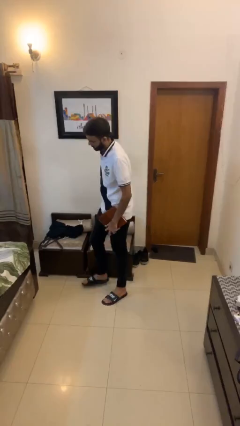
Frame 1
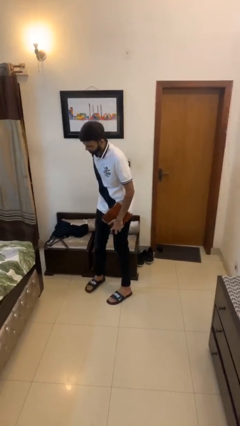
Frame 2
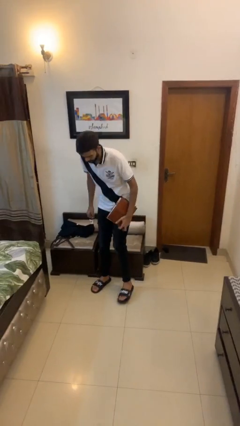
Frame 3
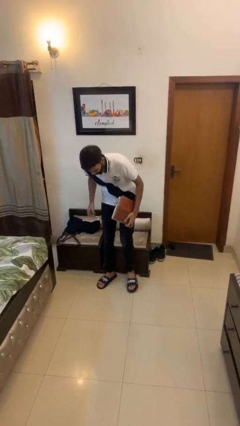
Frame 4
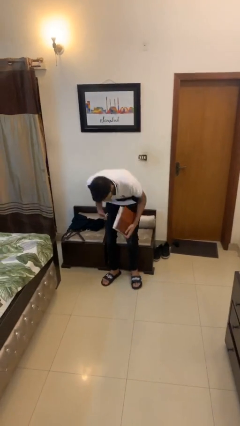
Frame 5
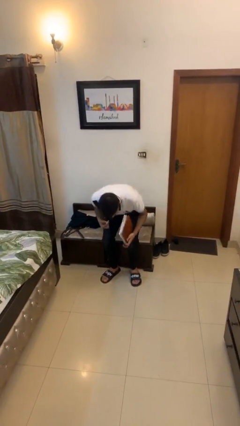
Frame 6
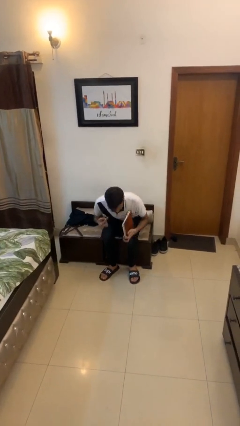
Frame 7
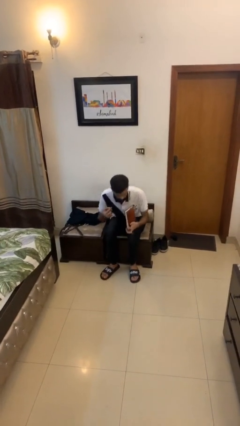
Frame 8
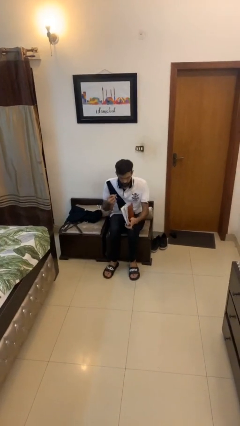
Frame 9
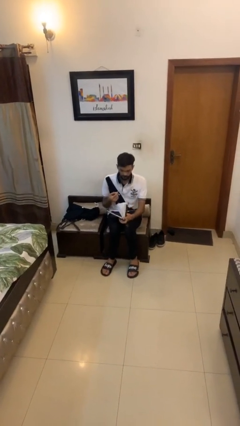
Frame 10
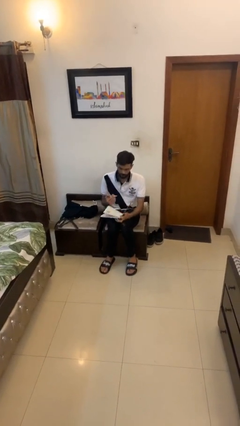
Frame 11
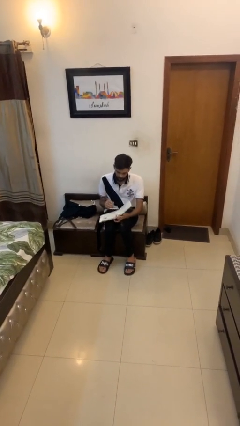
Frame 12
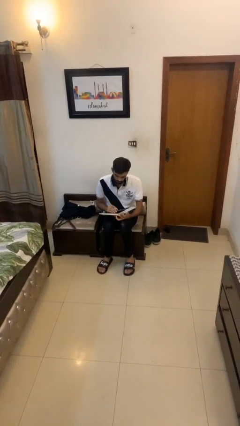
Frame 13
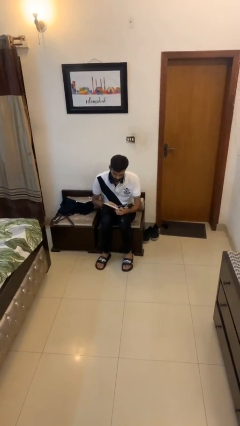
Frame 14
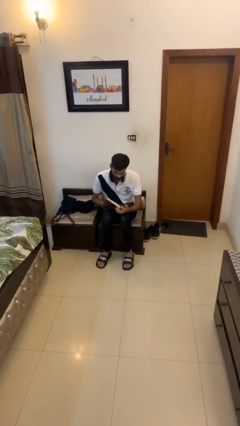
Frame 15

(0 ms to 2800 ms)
person sits down

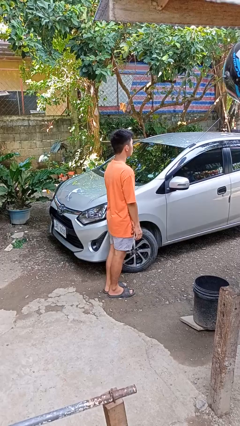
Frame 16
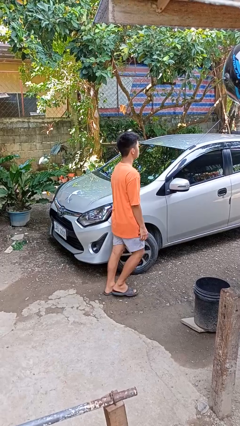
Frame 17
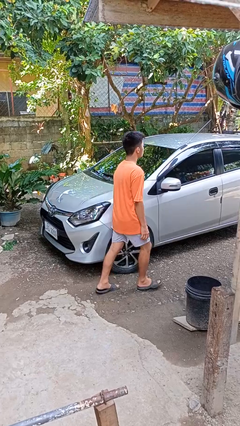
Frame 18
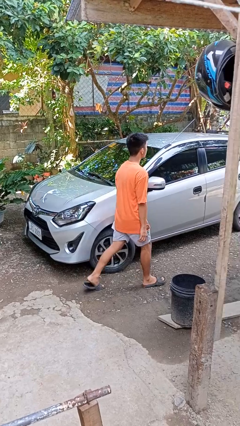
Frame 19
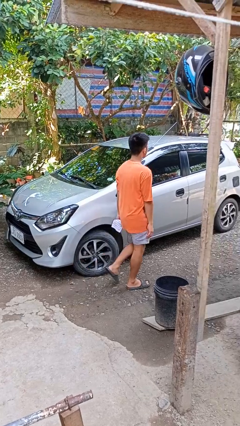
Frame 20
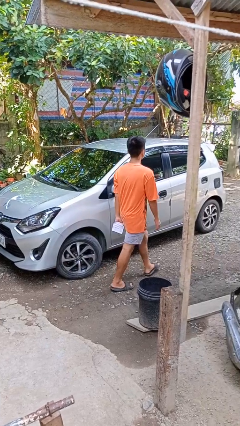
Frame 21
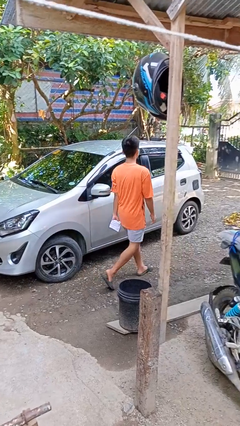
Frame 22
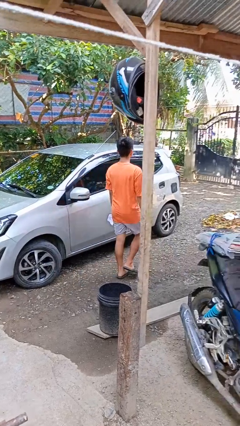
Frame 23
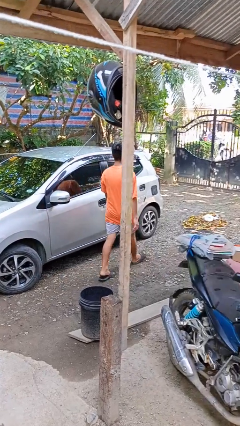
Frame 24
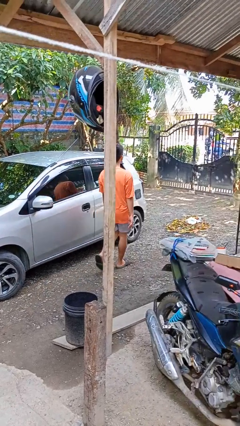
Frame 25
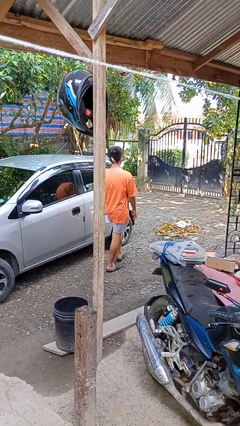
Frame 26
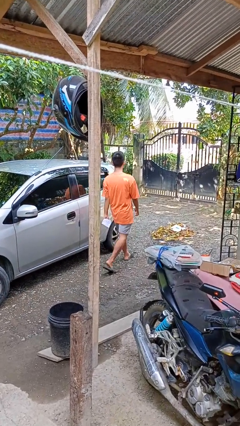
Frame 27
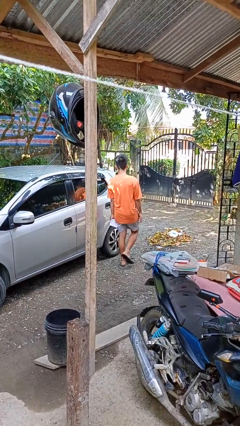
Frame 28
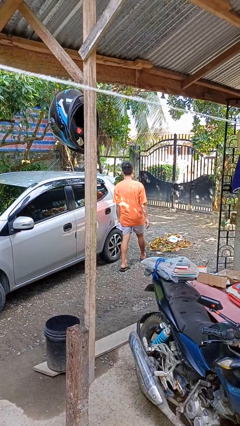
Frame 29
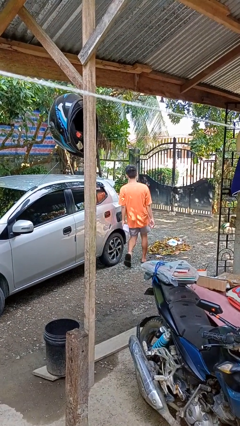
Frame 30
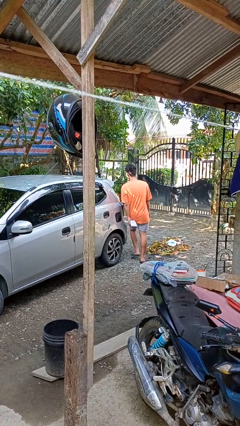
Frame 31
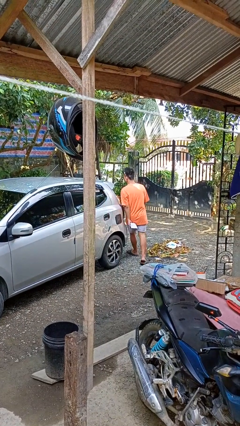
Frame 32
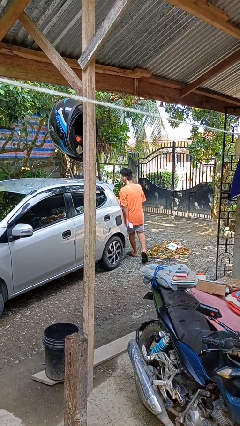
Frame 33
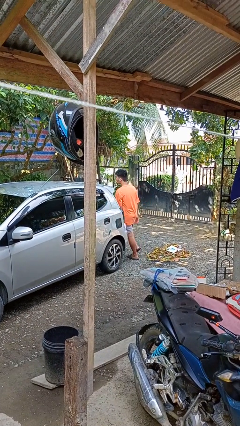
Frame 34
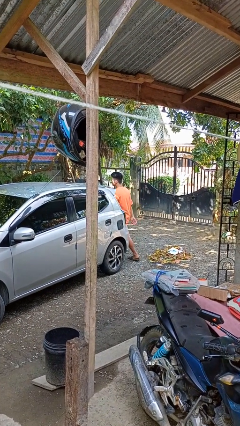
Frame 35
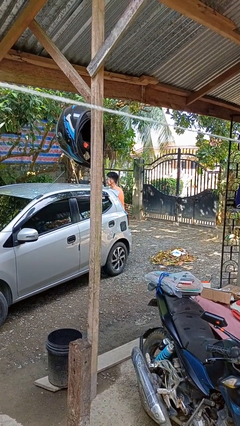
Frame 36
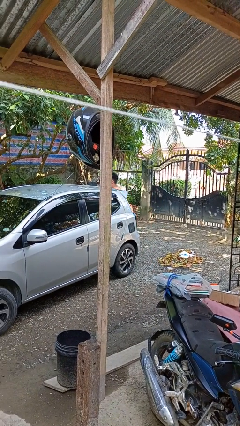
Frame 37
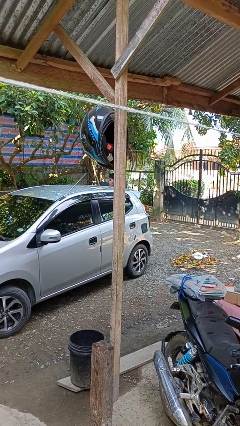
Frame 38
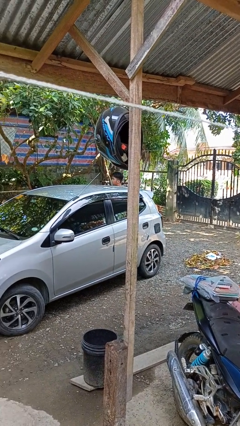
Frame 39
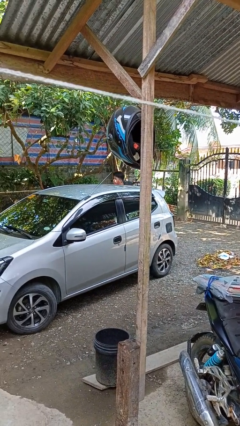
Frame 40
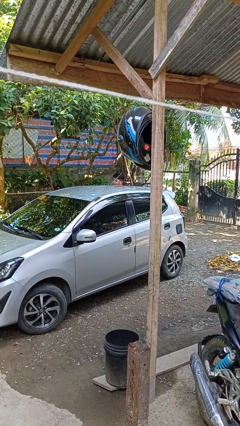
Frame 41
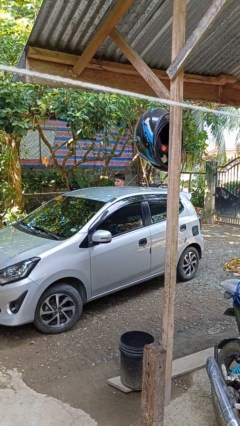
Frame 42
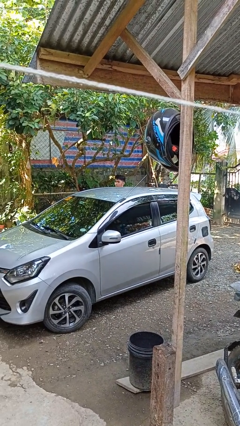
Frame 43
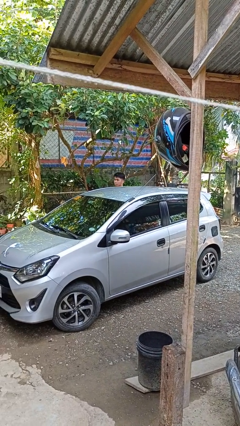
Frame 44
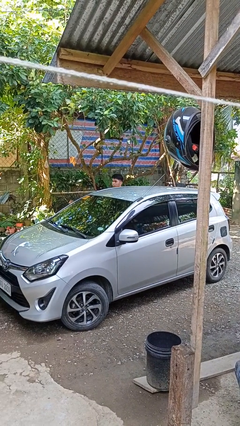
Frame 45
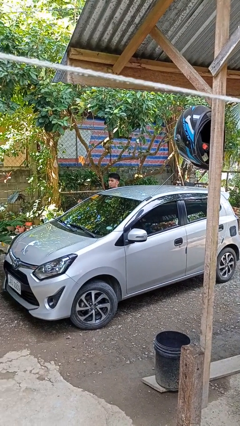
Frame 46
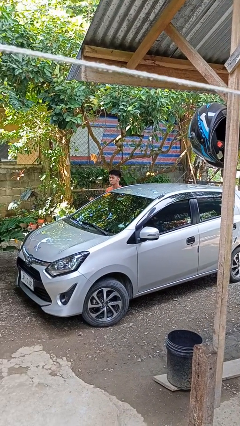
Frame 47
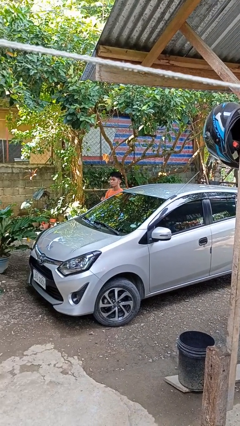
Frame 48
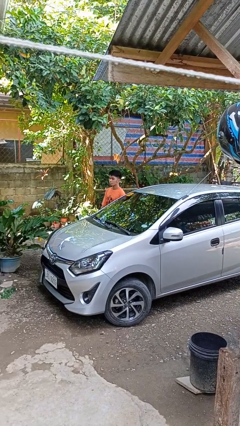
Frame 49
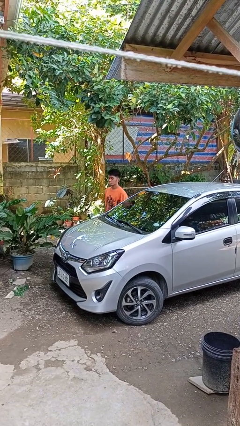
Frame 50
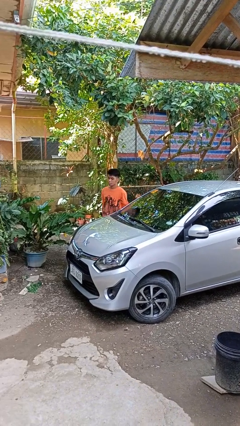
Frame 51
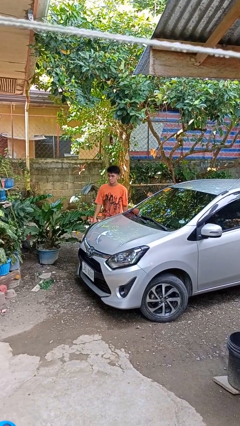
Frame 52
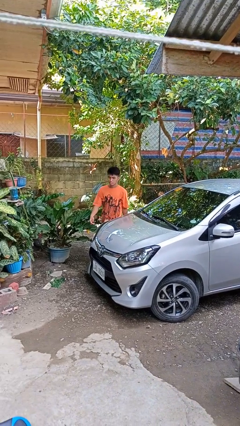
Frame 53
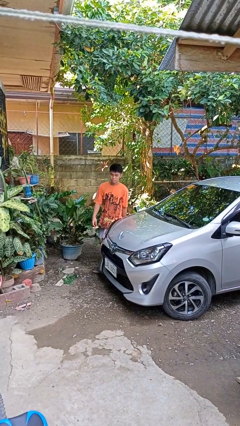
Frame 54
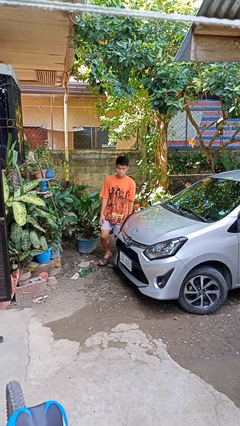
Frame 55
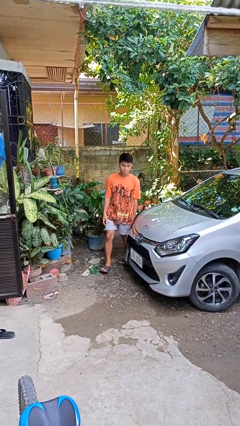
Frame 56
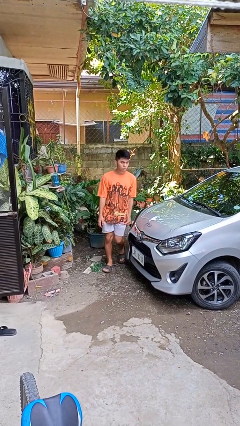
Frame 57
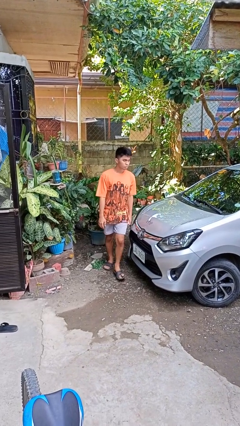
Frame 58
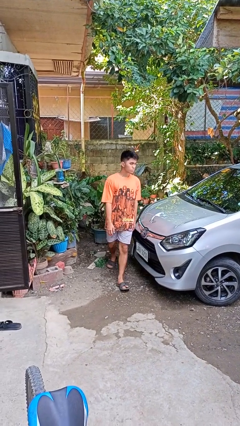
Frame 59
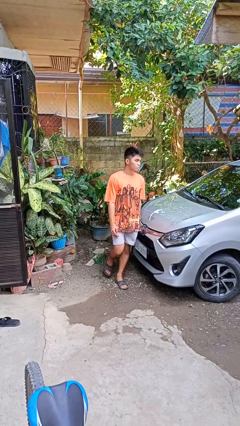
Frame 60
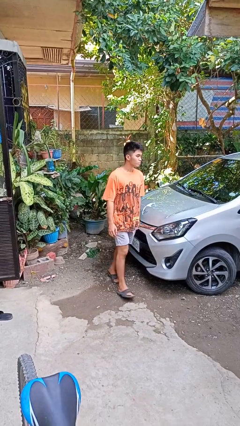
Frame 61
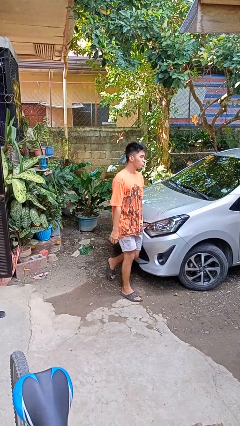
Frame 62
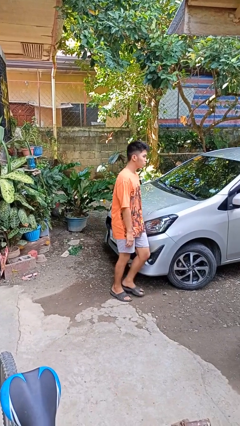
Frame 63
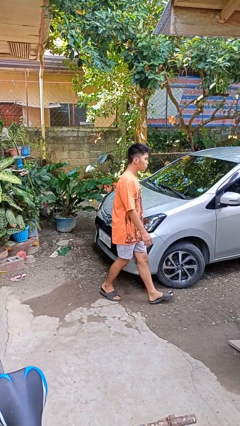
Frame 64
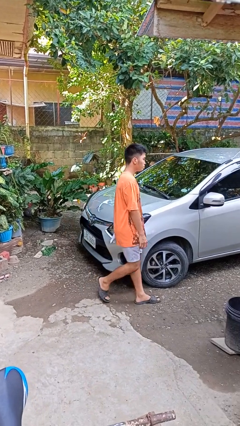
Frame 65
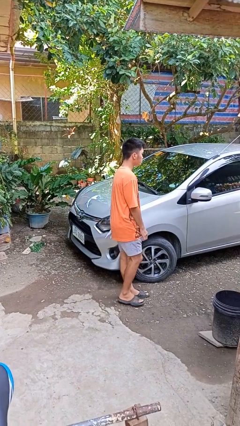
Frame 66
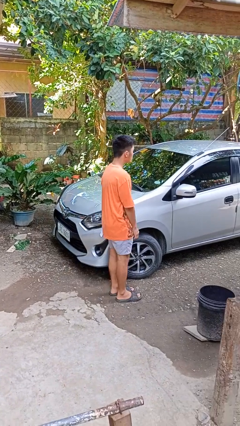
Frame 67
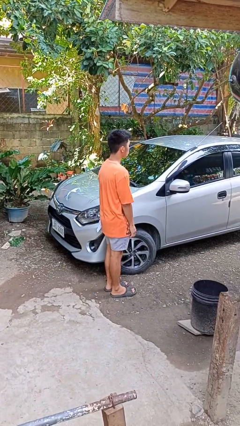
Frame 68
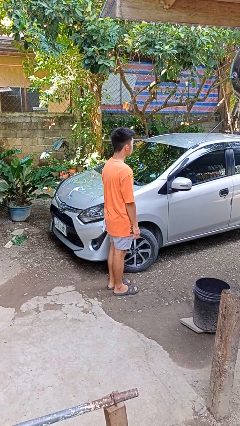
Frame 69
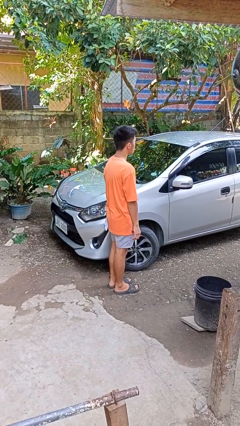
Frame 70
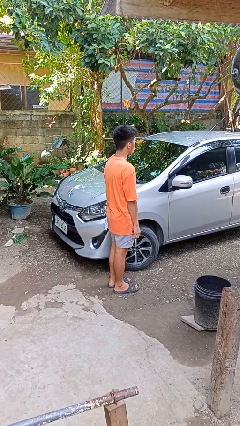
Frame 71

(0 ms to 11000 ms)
person walks around car

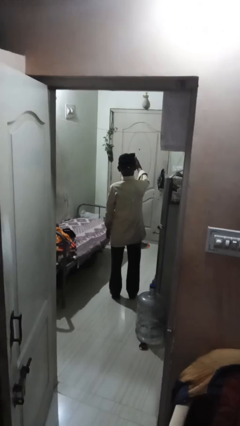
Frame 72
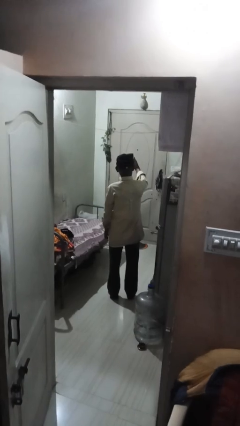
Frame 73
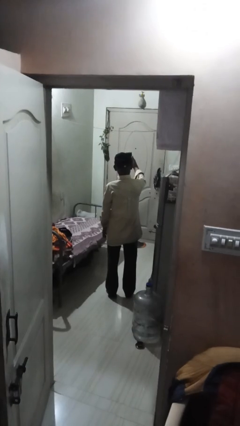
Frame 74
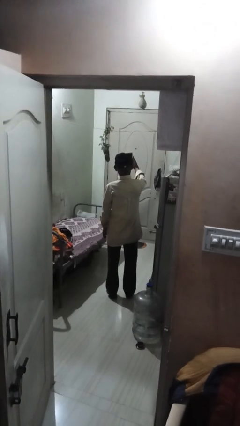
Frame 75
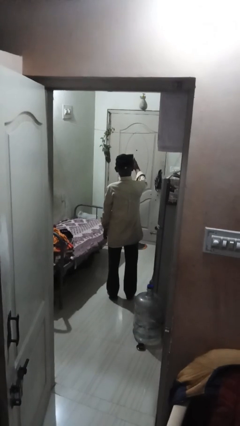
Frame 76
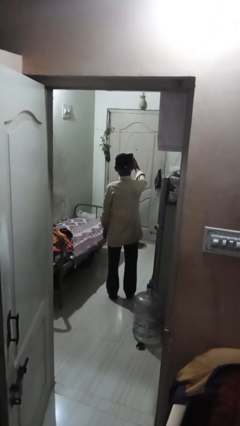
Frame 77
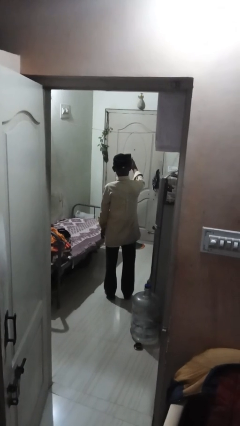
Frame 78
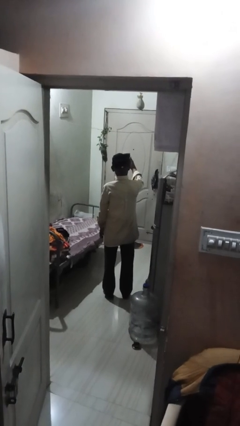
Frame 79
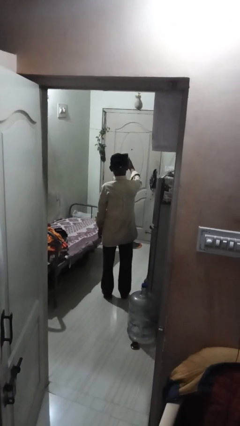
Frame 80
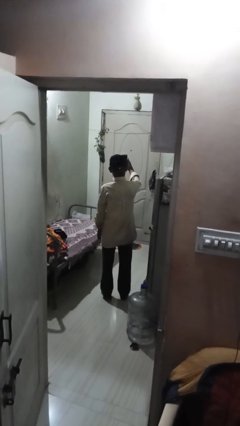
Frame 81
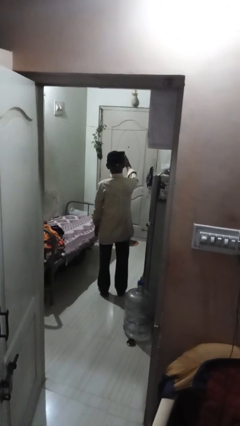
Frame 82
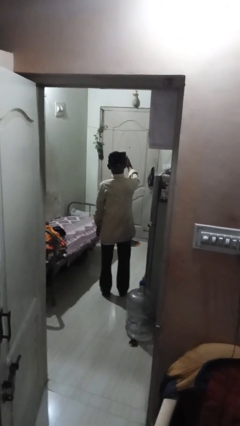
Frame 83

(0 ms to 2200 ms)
person takes selfie

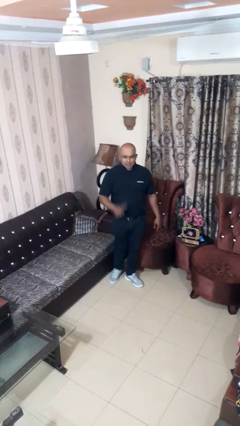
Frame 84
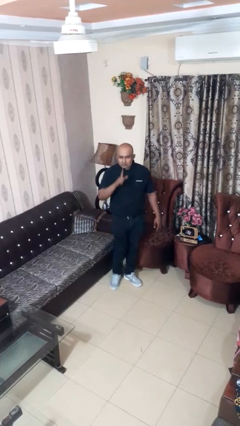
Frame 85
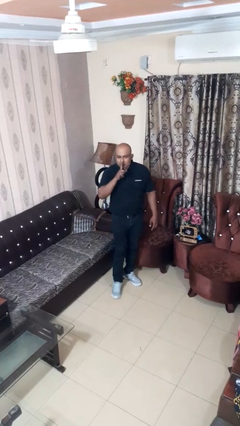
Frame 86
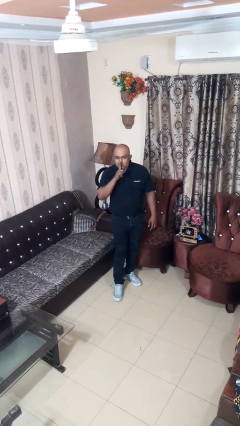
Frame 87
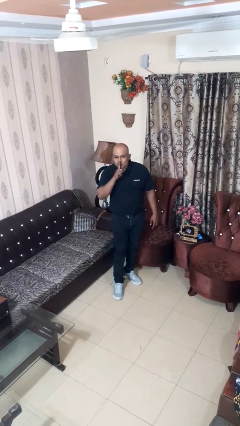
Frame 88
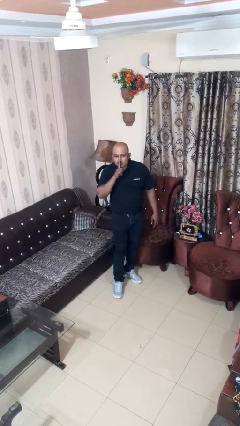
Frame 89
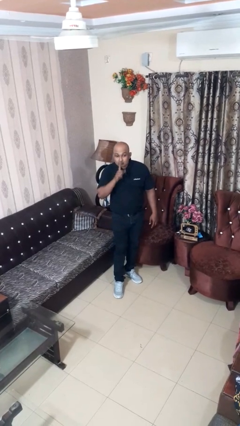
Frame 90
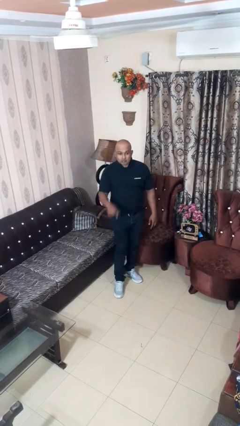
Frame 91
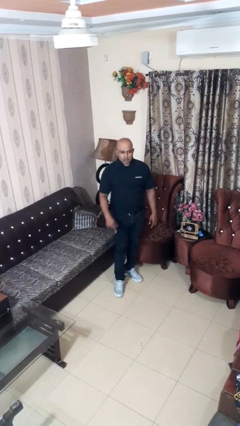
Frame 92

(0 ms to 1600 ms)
person gestures be quiet
